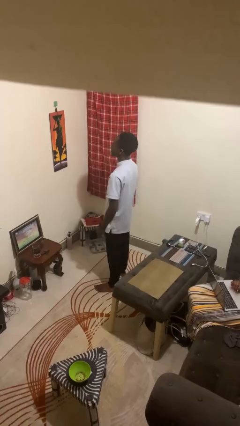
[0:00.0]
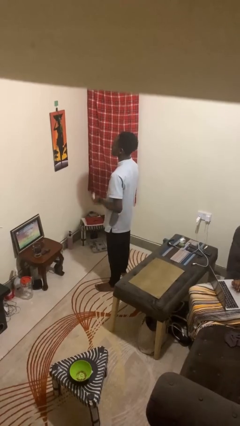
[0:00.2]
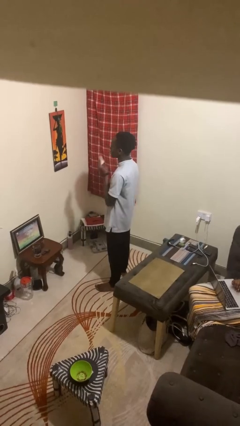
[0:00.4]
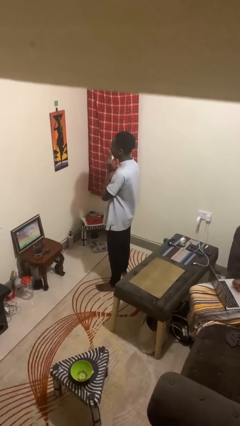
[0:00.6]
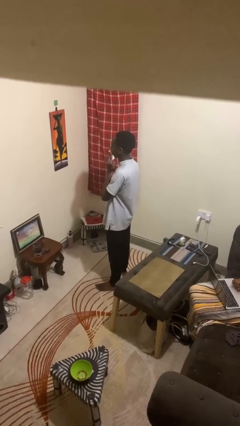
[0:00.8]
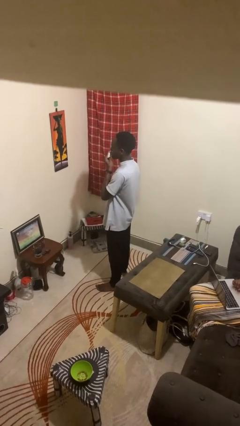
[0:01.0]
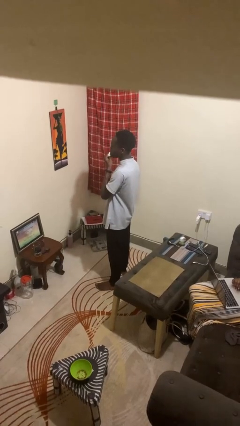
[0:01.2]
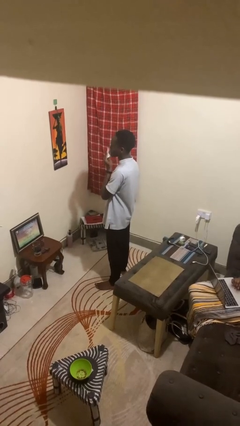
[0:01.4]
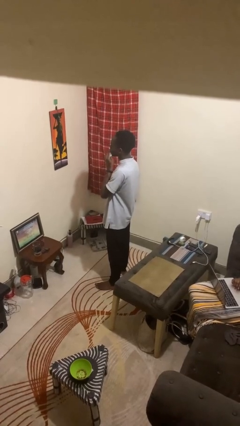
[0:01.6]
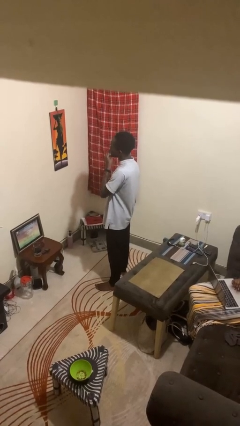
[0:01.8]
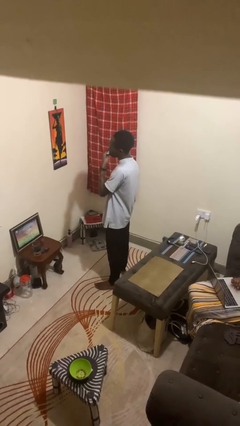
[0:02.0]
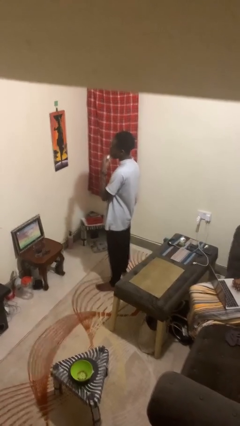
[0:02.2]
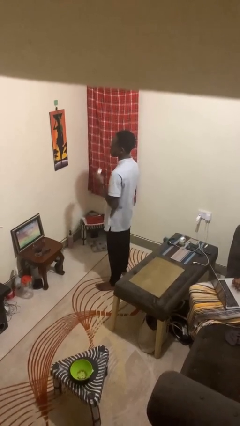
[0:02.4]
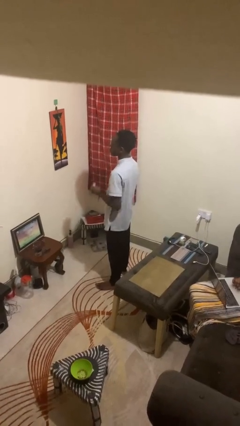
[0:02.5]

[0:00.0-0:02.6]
person wipes mouth with napkin

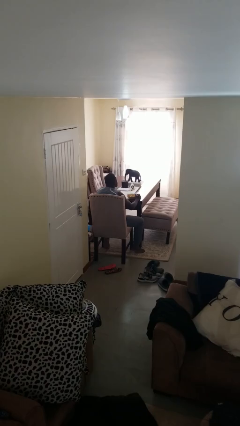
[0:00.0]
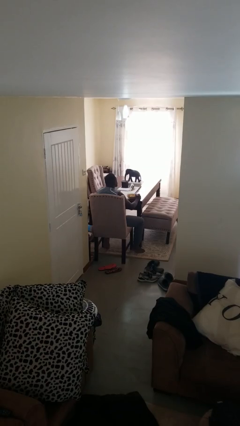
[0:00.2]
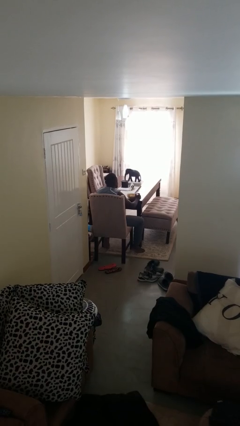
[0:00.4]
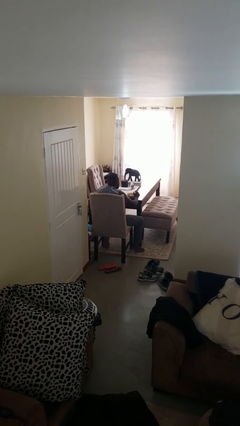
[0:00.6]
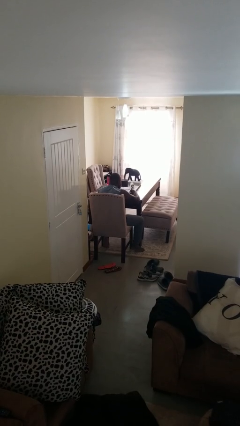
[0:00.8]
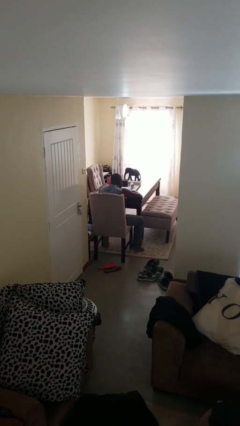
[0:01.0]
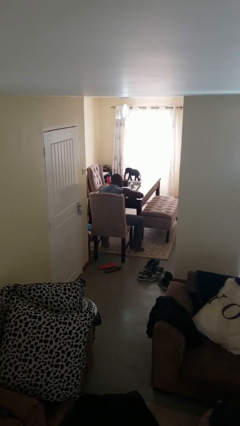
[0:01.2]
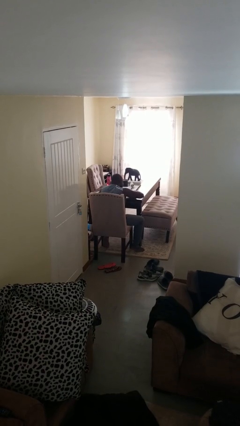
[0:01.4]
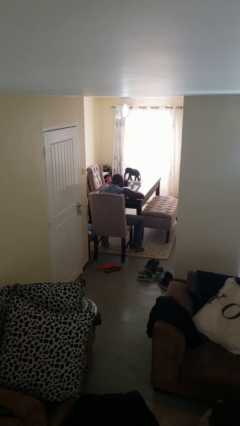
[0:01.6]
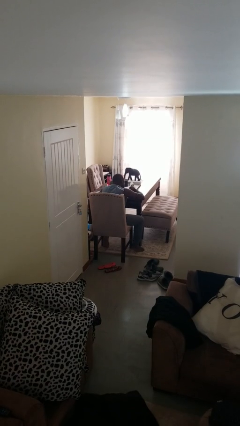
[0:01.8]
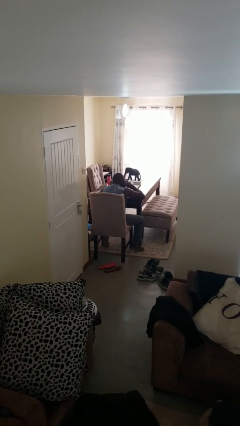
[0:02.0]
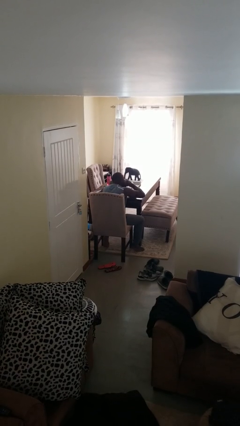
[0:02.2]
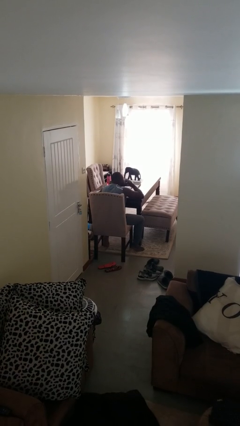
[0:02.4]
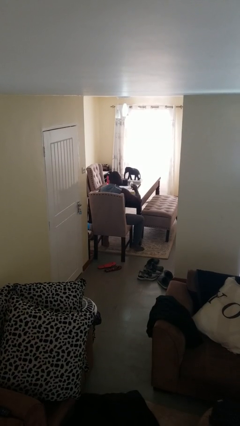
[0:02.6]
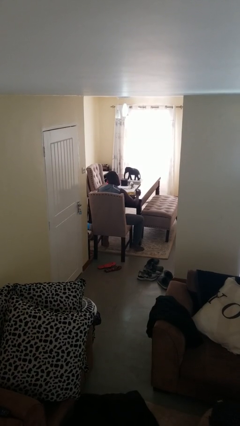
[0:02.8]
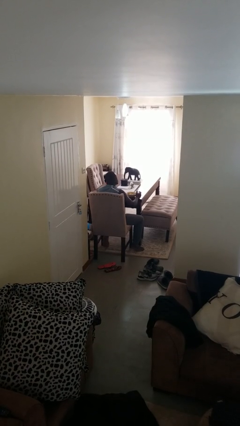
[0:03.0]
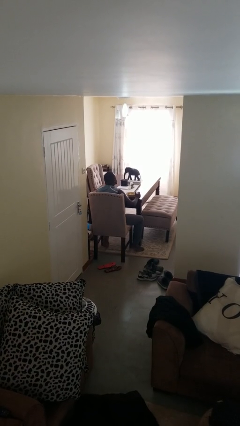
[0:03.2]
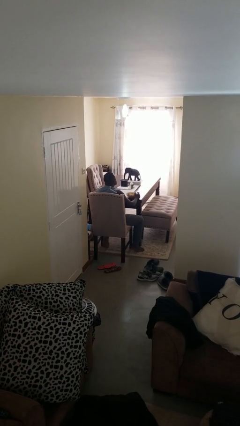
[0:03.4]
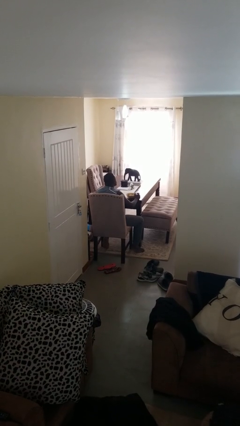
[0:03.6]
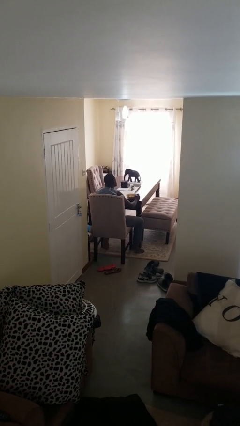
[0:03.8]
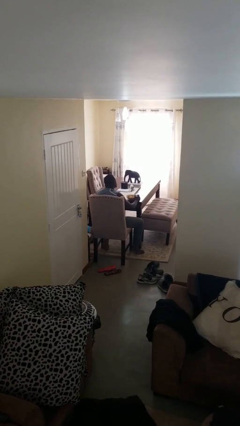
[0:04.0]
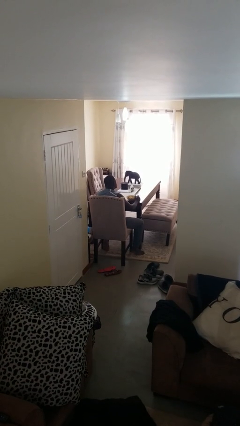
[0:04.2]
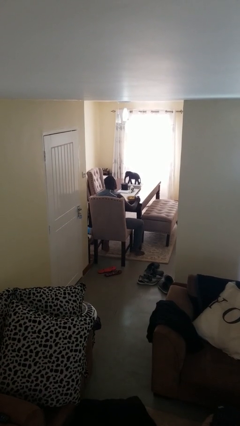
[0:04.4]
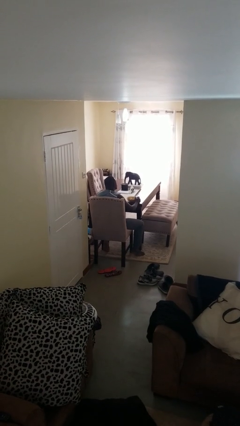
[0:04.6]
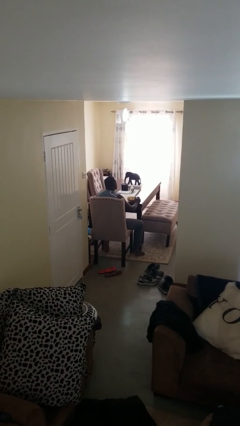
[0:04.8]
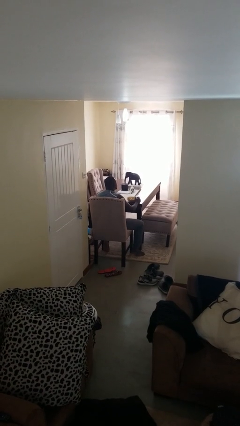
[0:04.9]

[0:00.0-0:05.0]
person eats with hands

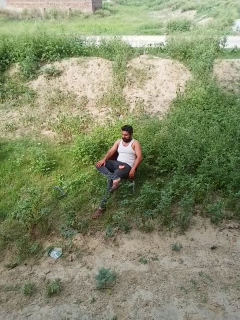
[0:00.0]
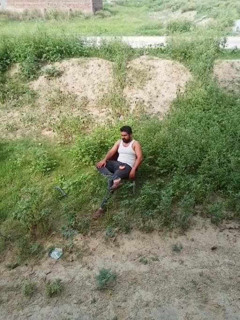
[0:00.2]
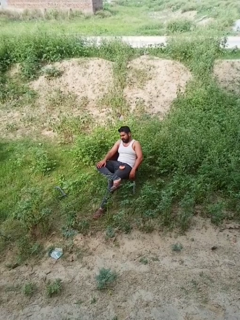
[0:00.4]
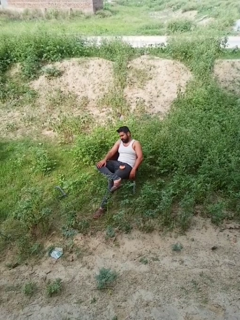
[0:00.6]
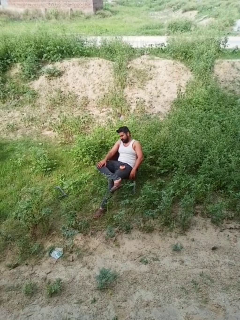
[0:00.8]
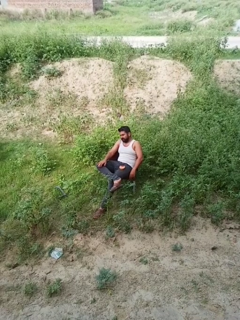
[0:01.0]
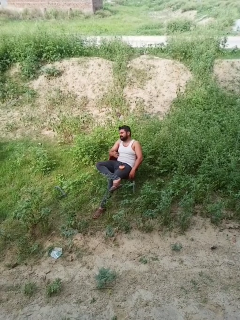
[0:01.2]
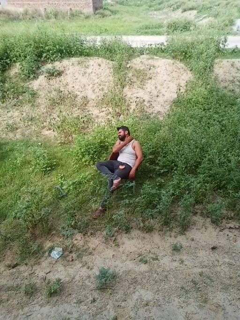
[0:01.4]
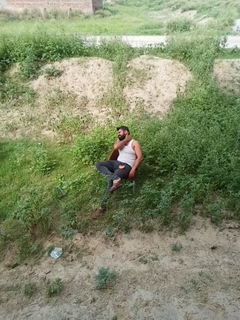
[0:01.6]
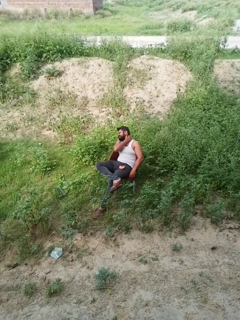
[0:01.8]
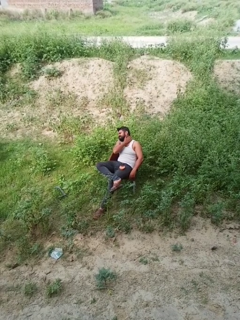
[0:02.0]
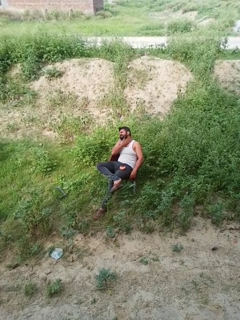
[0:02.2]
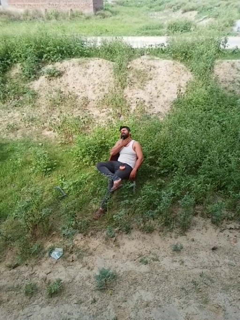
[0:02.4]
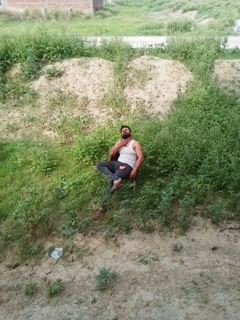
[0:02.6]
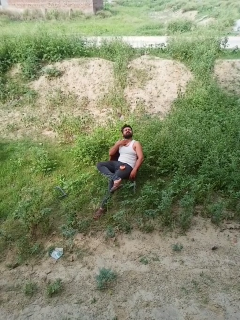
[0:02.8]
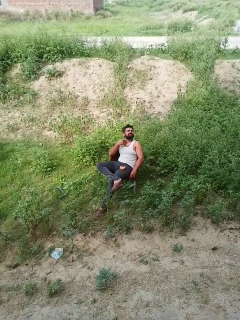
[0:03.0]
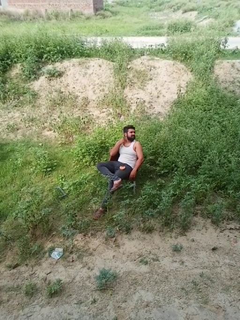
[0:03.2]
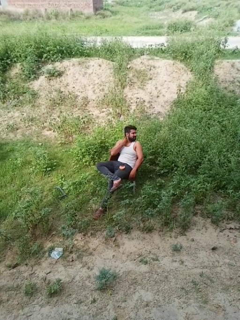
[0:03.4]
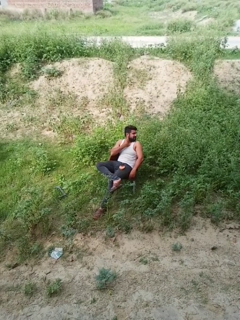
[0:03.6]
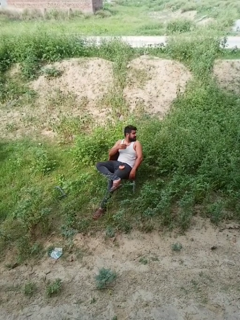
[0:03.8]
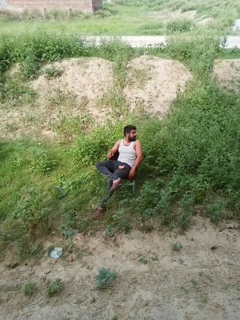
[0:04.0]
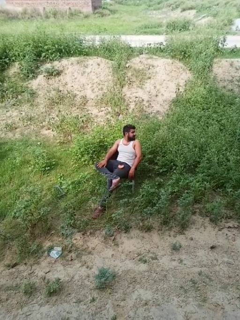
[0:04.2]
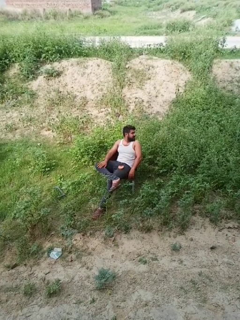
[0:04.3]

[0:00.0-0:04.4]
person rubs neck

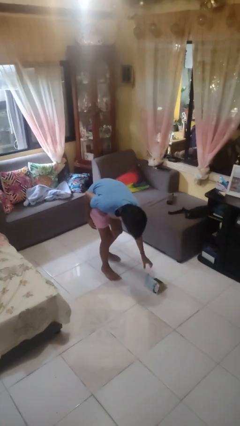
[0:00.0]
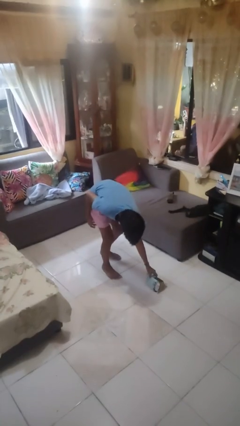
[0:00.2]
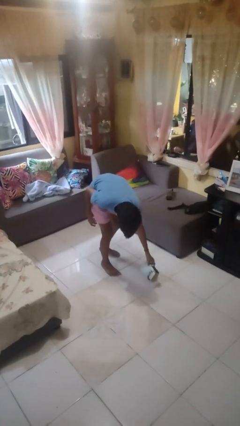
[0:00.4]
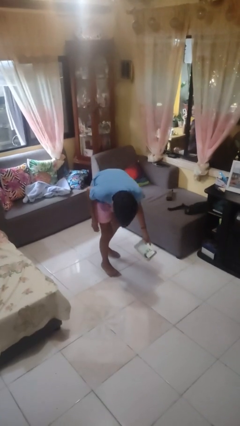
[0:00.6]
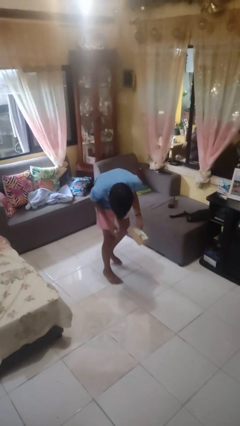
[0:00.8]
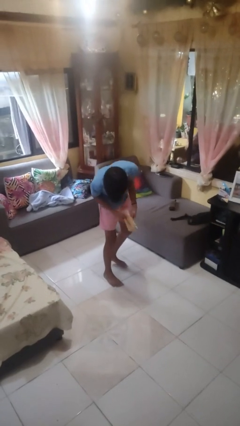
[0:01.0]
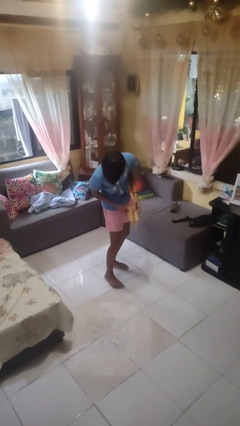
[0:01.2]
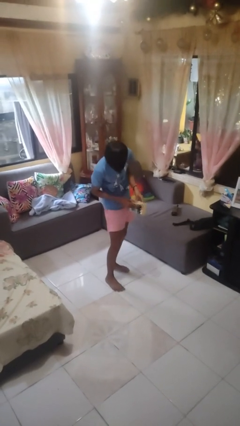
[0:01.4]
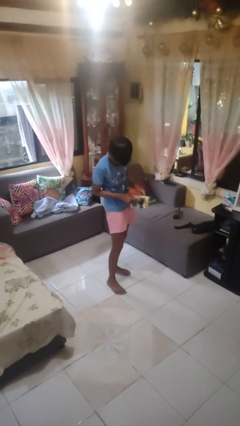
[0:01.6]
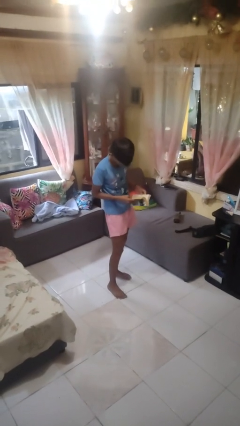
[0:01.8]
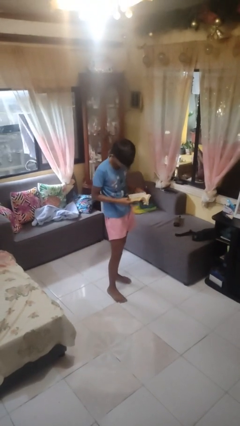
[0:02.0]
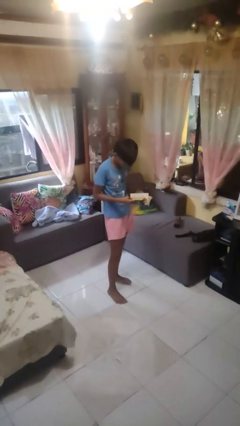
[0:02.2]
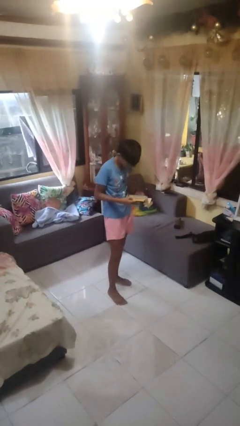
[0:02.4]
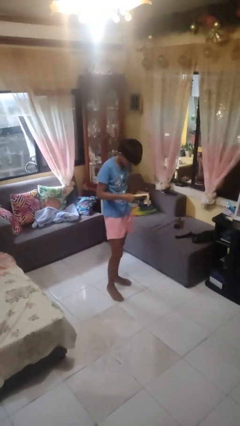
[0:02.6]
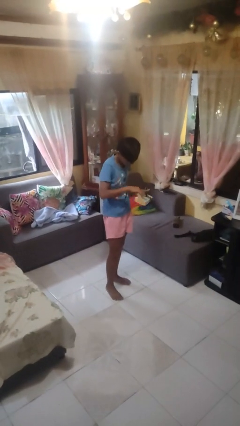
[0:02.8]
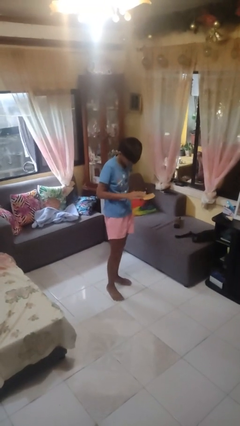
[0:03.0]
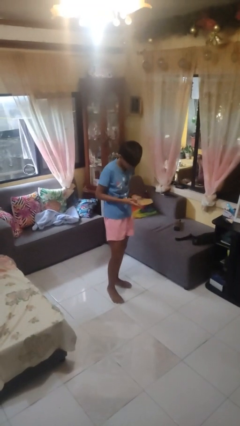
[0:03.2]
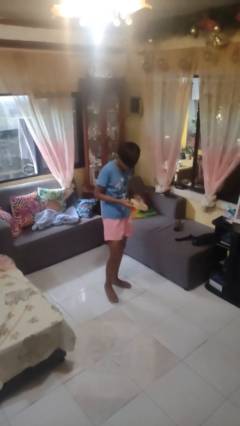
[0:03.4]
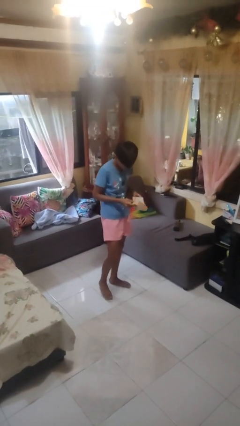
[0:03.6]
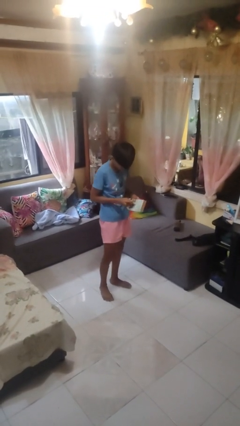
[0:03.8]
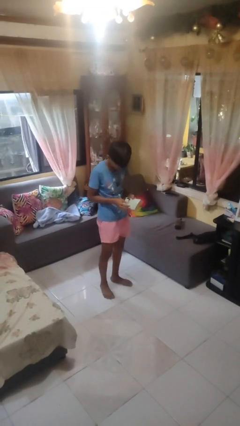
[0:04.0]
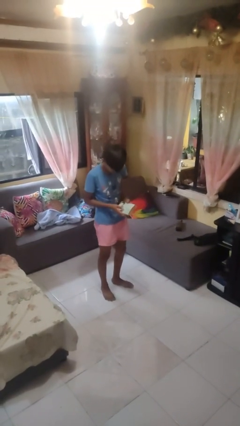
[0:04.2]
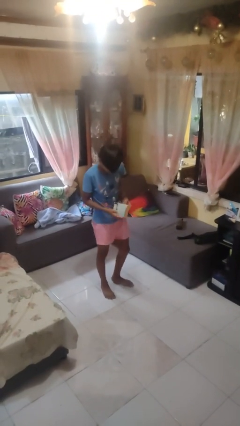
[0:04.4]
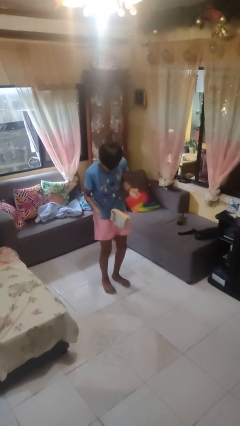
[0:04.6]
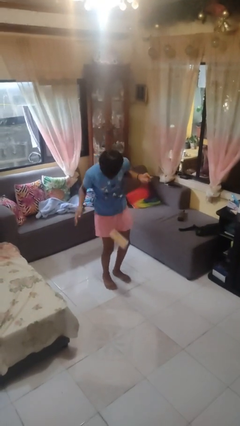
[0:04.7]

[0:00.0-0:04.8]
person picks up object from floor

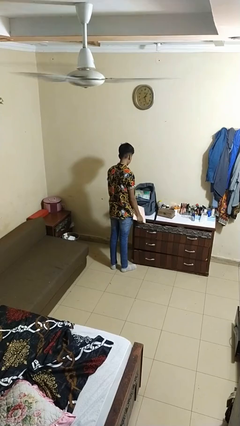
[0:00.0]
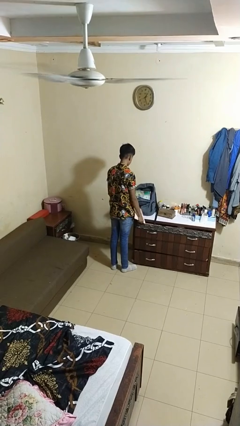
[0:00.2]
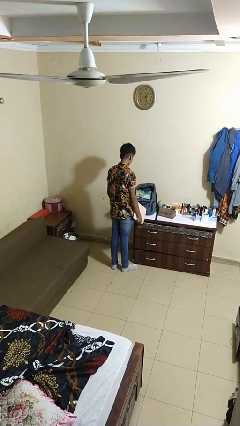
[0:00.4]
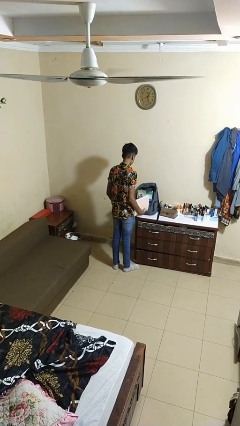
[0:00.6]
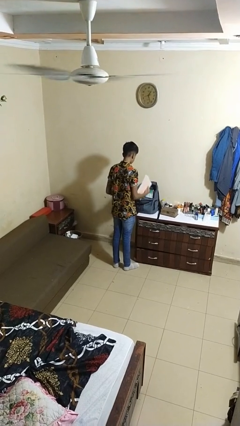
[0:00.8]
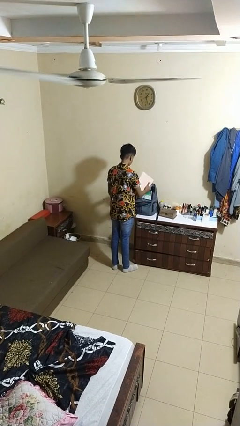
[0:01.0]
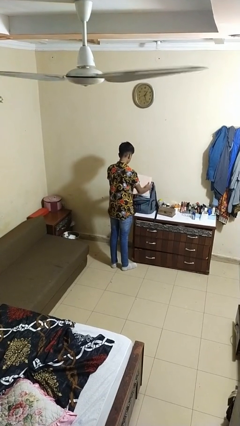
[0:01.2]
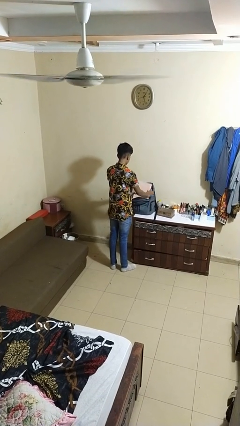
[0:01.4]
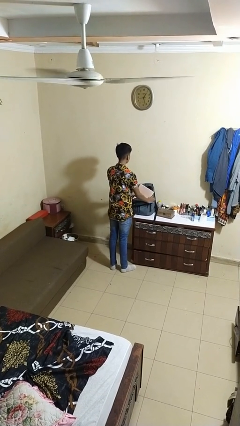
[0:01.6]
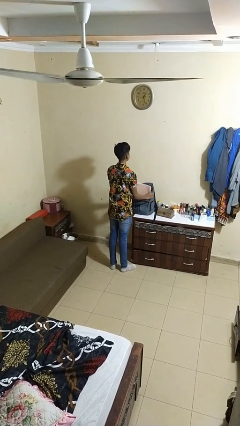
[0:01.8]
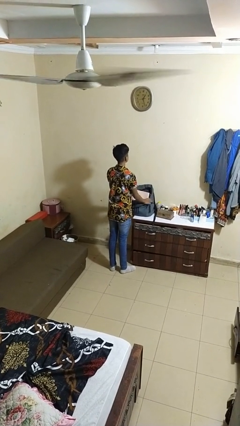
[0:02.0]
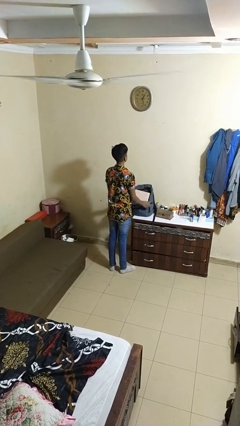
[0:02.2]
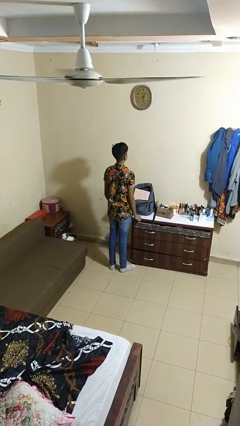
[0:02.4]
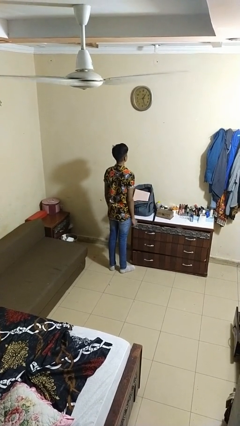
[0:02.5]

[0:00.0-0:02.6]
person puts object into backpack
